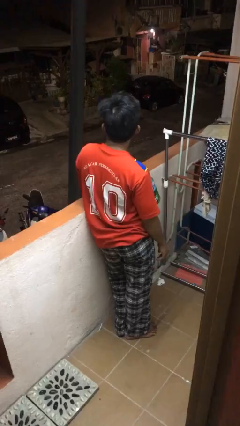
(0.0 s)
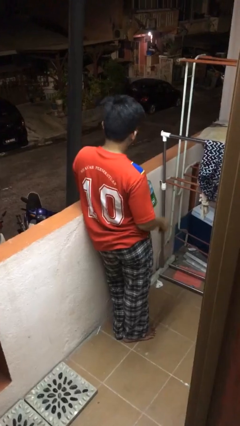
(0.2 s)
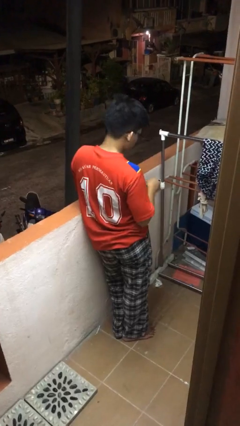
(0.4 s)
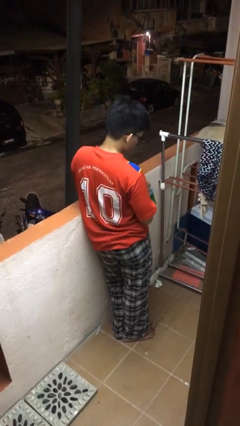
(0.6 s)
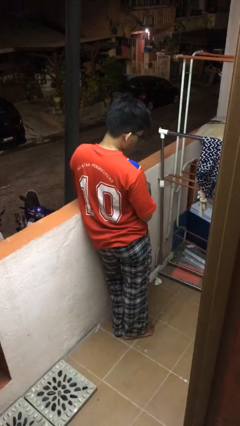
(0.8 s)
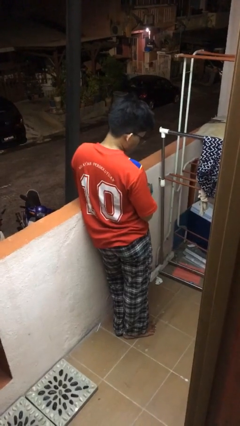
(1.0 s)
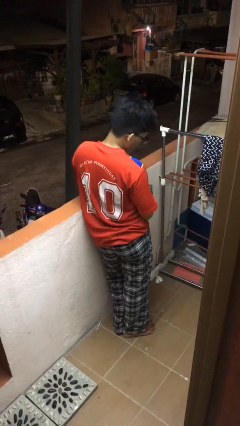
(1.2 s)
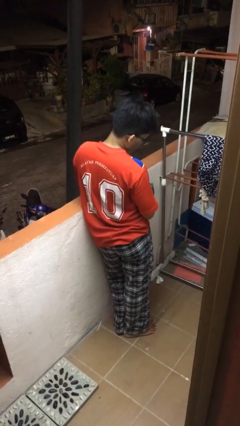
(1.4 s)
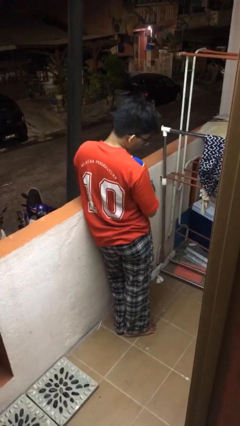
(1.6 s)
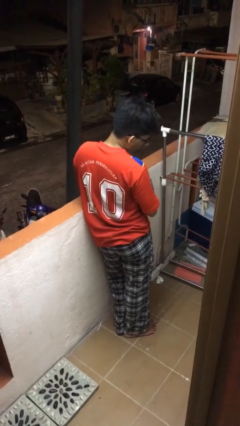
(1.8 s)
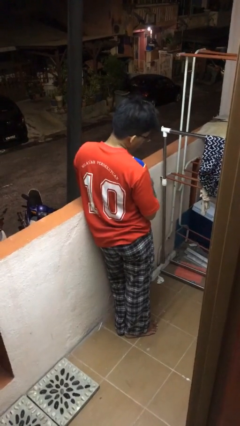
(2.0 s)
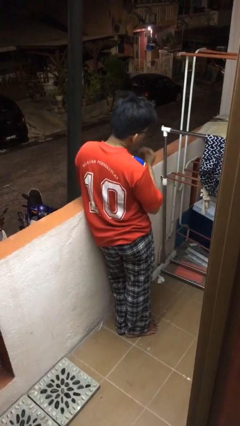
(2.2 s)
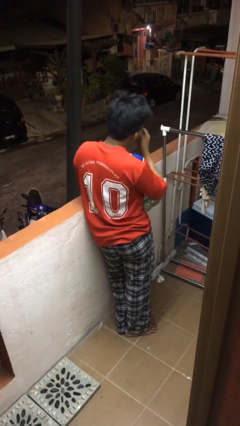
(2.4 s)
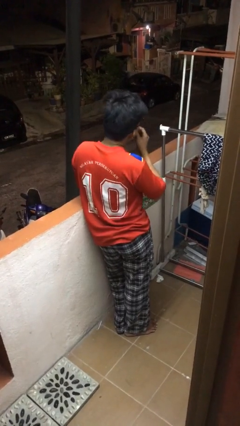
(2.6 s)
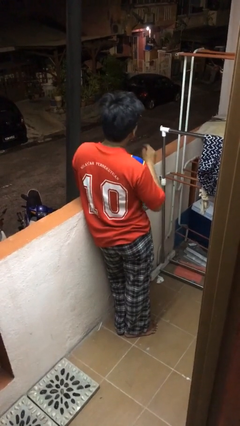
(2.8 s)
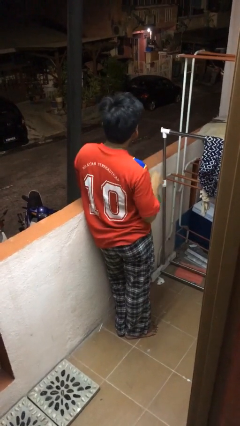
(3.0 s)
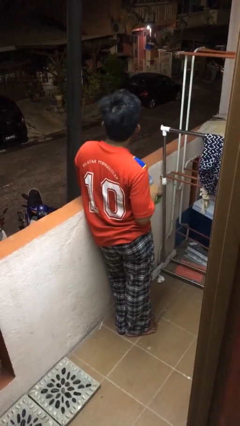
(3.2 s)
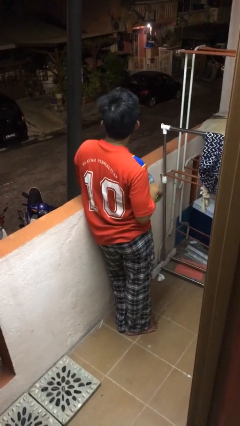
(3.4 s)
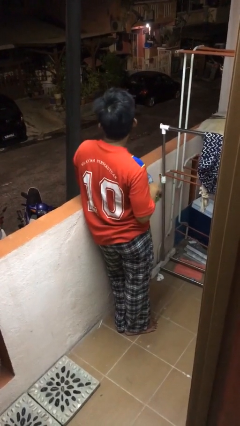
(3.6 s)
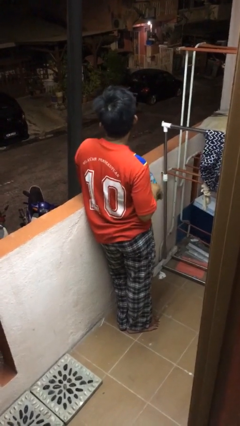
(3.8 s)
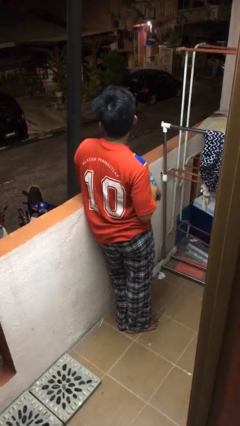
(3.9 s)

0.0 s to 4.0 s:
person eats snack from bag

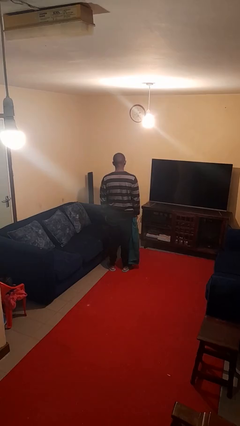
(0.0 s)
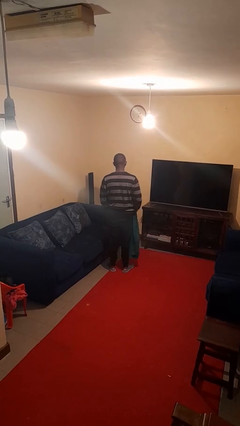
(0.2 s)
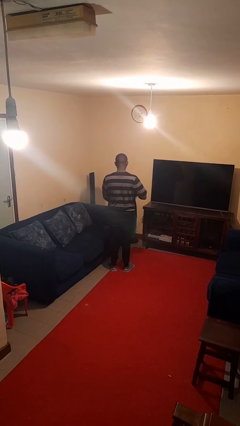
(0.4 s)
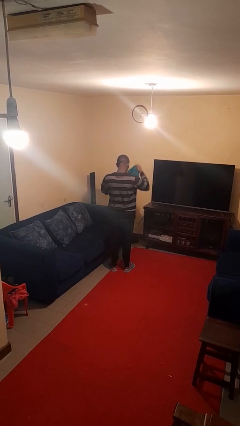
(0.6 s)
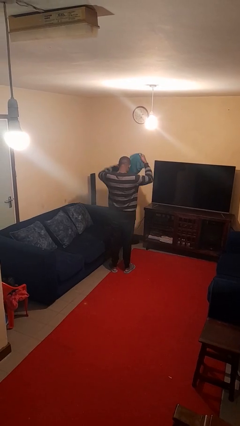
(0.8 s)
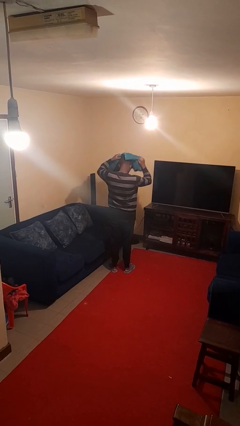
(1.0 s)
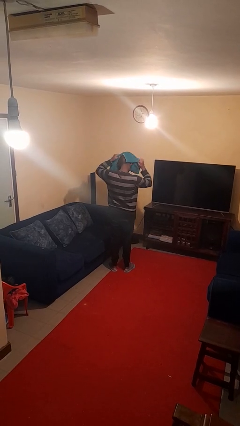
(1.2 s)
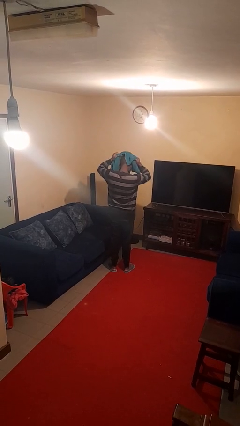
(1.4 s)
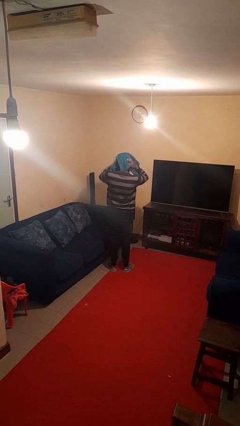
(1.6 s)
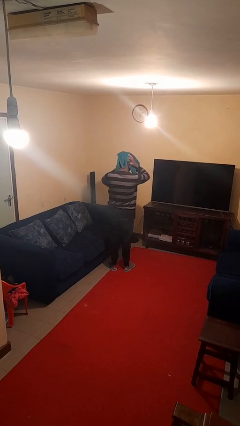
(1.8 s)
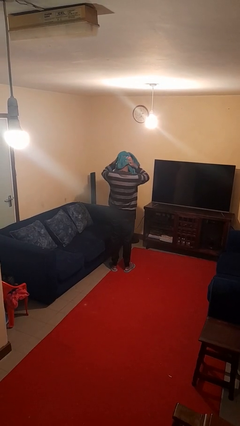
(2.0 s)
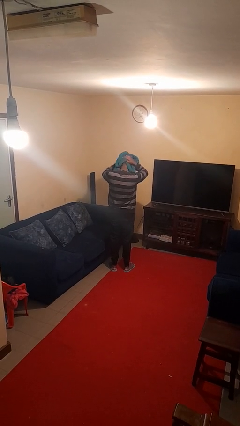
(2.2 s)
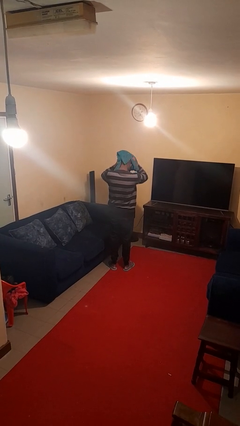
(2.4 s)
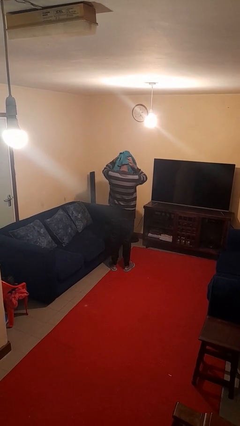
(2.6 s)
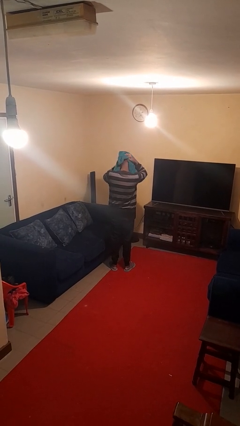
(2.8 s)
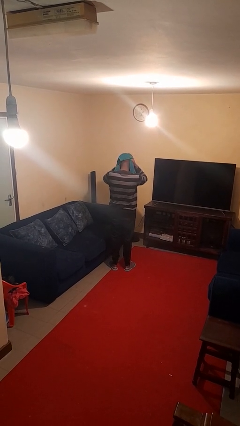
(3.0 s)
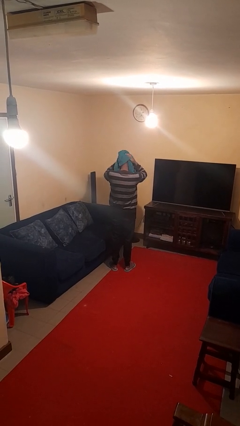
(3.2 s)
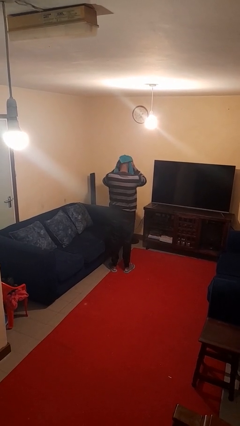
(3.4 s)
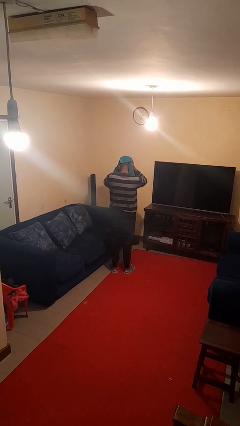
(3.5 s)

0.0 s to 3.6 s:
person dries hair with towel

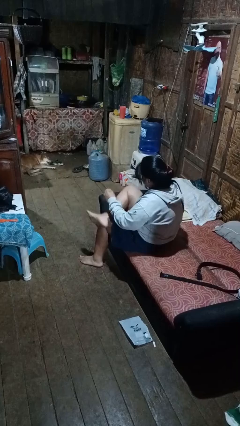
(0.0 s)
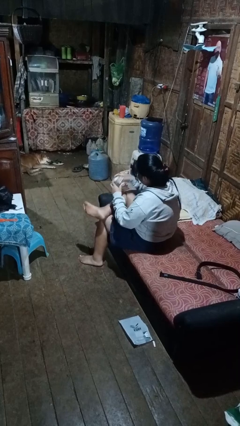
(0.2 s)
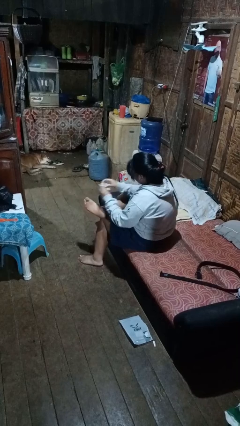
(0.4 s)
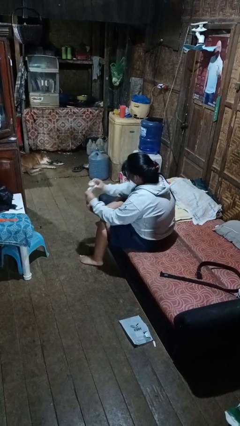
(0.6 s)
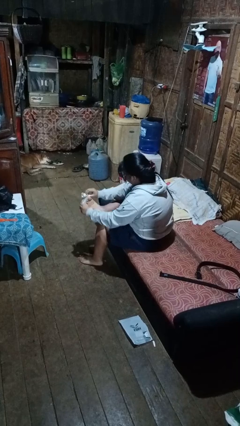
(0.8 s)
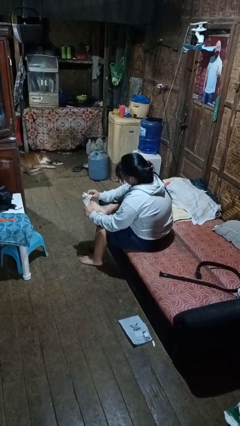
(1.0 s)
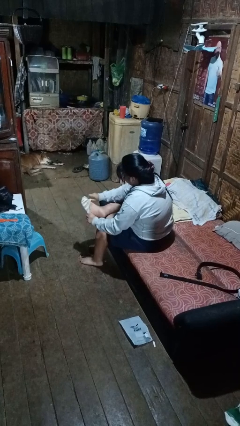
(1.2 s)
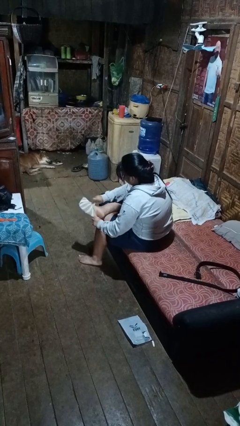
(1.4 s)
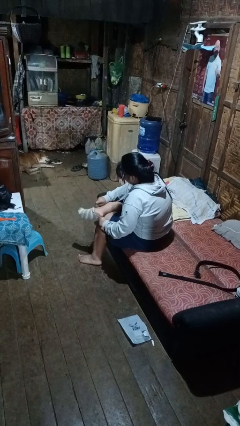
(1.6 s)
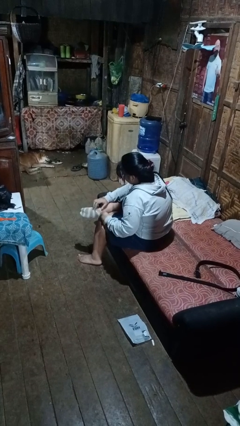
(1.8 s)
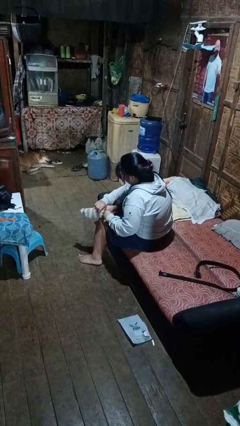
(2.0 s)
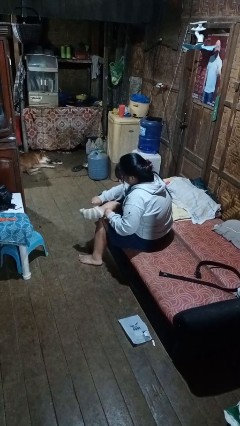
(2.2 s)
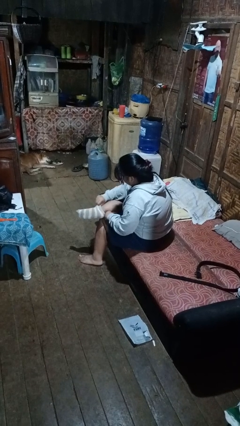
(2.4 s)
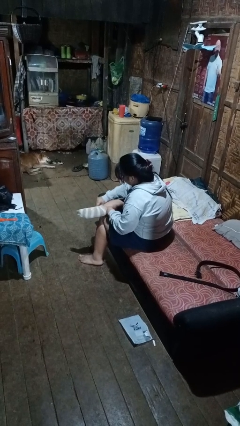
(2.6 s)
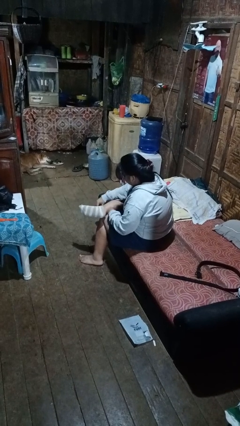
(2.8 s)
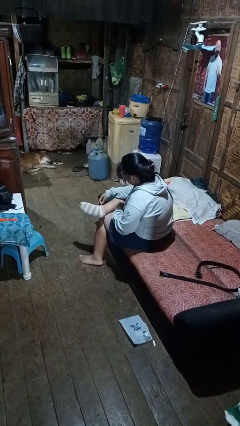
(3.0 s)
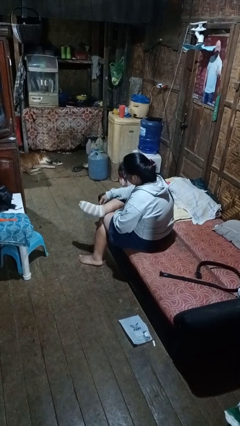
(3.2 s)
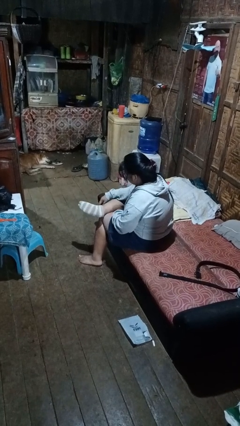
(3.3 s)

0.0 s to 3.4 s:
person puts on socks

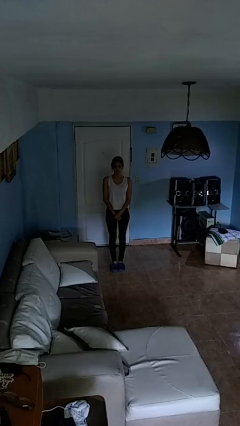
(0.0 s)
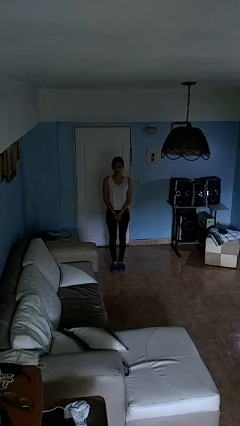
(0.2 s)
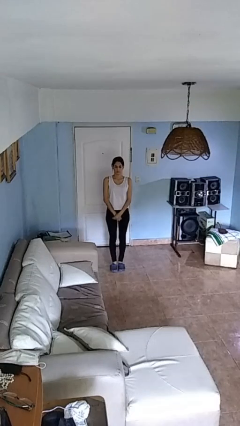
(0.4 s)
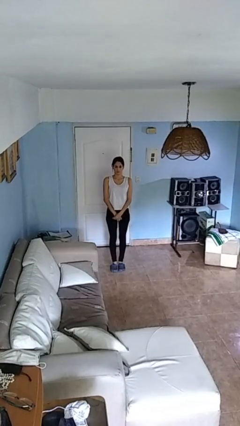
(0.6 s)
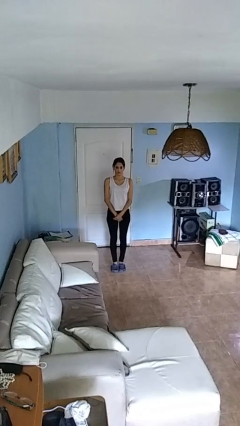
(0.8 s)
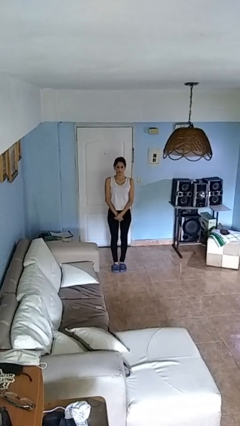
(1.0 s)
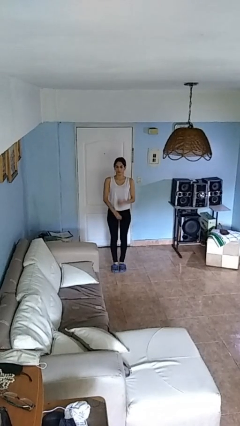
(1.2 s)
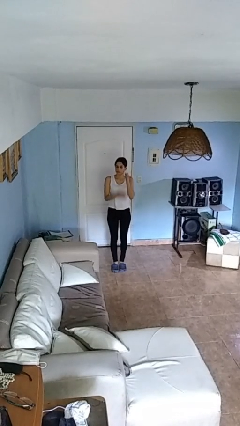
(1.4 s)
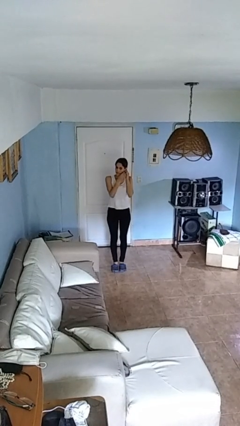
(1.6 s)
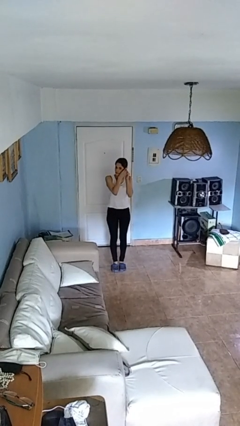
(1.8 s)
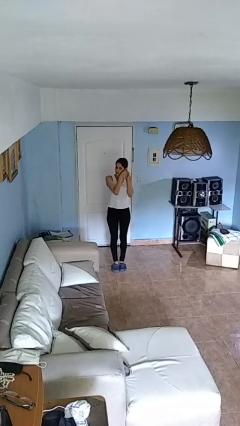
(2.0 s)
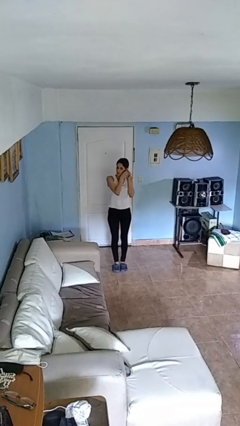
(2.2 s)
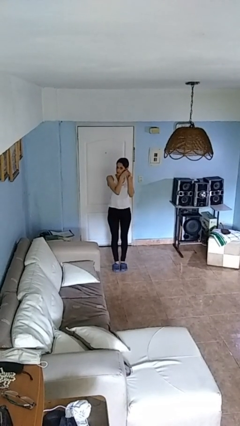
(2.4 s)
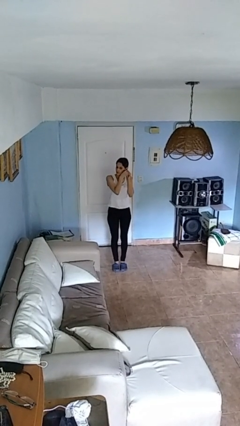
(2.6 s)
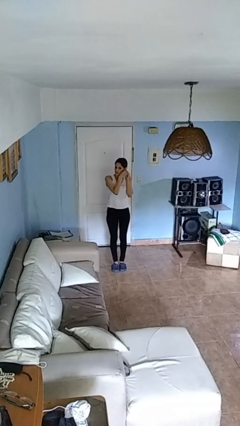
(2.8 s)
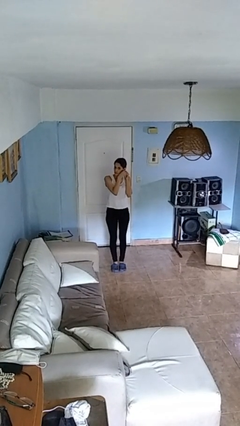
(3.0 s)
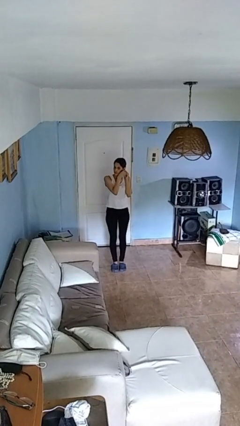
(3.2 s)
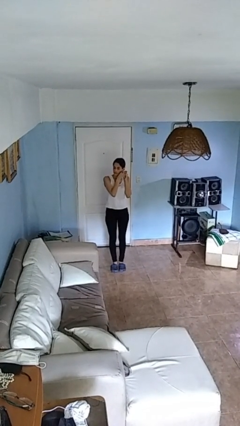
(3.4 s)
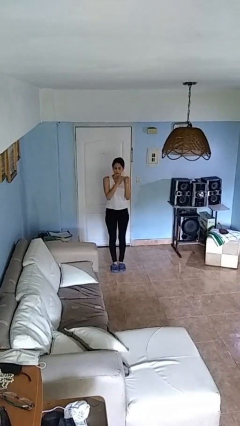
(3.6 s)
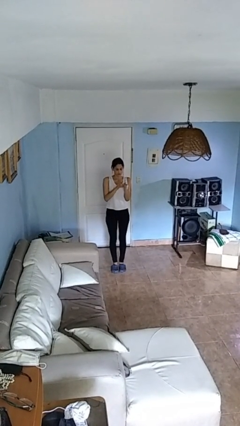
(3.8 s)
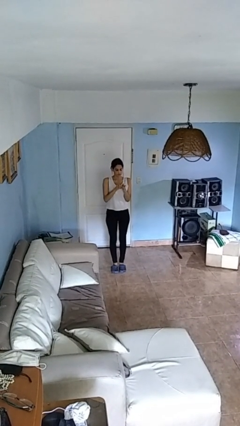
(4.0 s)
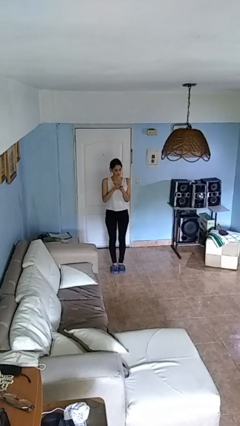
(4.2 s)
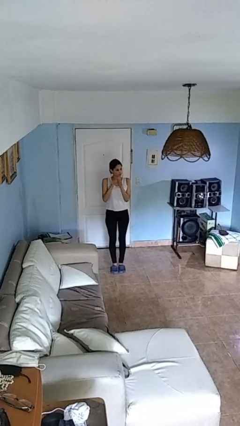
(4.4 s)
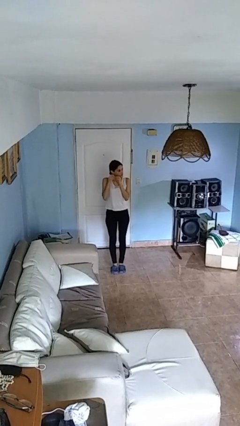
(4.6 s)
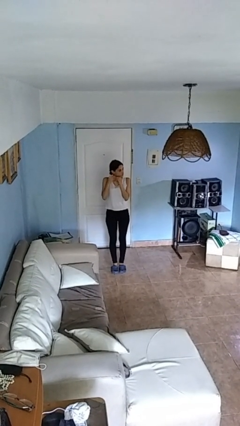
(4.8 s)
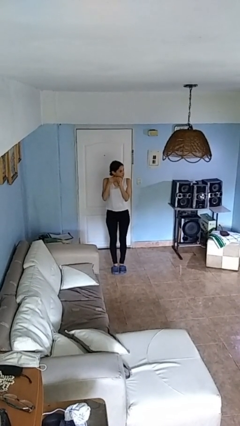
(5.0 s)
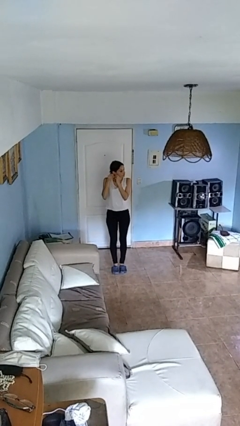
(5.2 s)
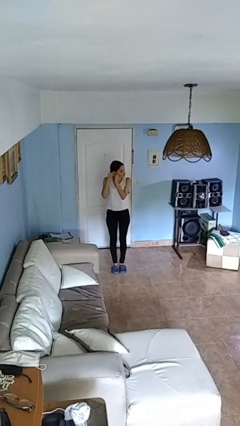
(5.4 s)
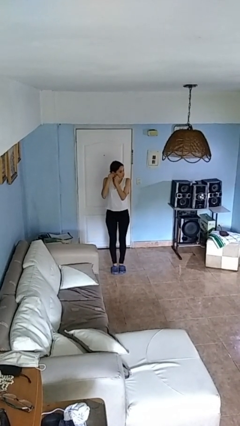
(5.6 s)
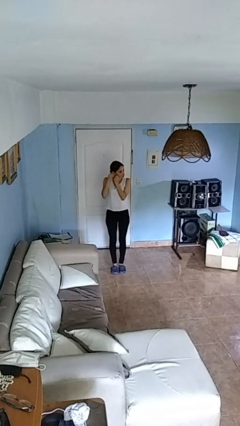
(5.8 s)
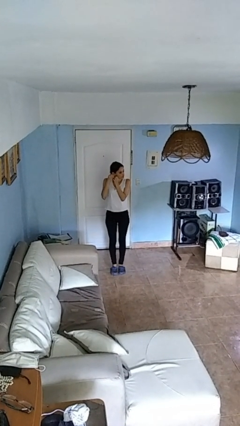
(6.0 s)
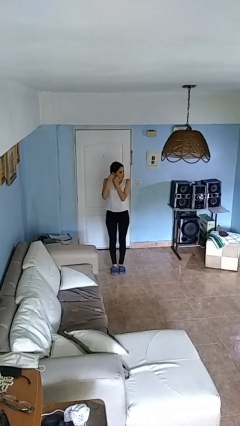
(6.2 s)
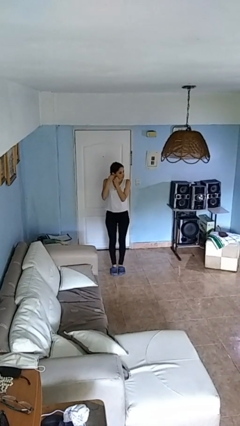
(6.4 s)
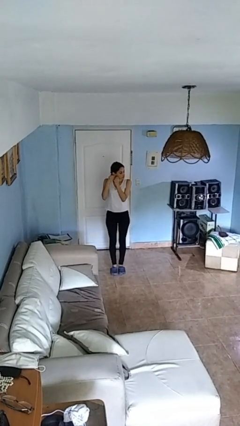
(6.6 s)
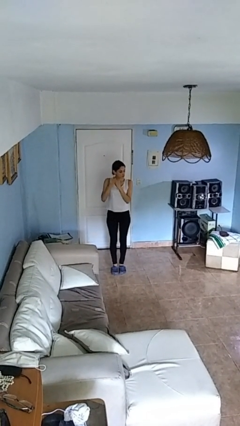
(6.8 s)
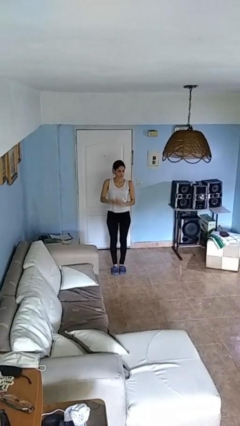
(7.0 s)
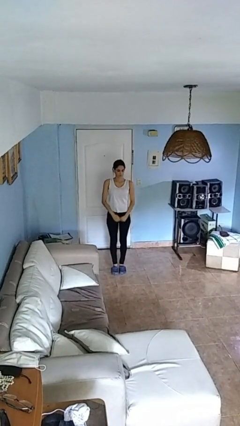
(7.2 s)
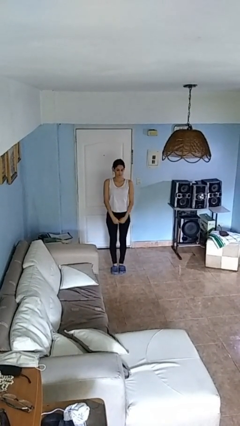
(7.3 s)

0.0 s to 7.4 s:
person puts on necklace
